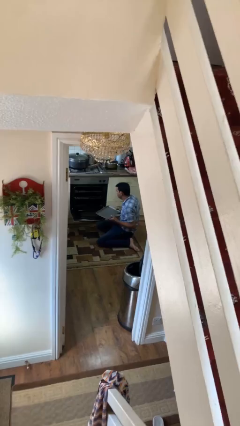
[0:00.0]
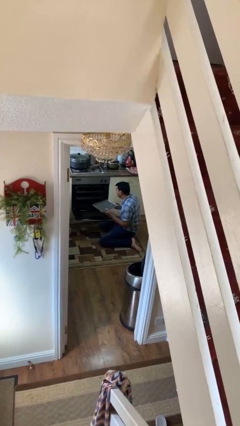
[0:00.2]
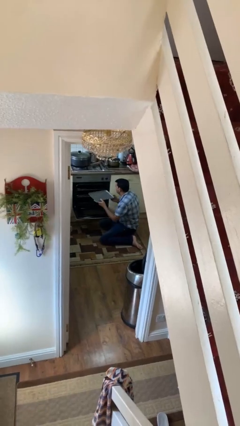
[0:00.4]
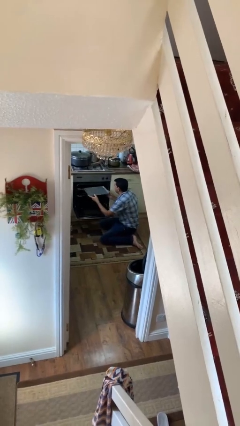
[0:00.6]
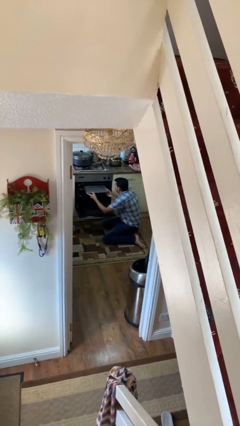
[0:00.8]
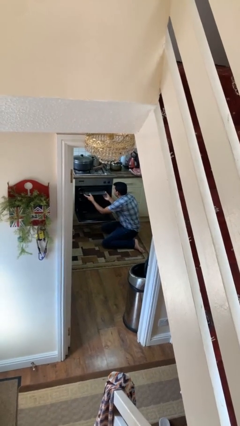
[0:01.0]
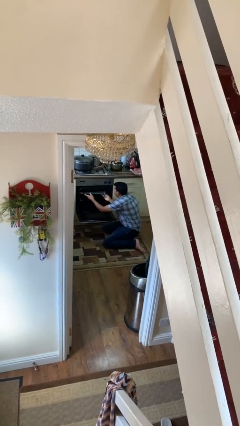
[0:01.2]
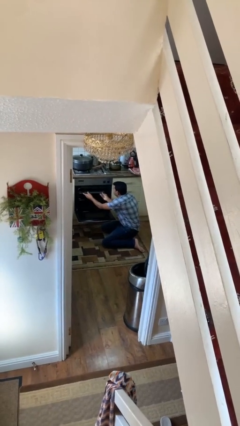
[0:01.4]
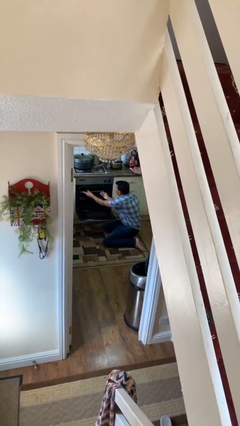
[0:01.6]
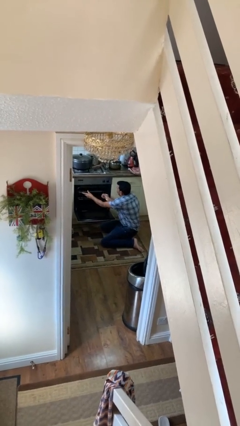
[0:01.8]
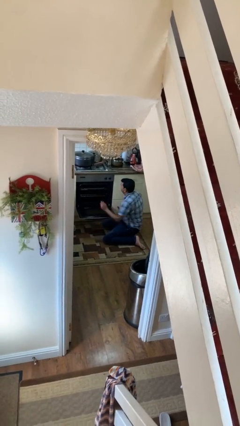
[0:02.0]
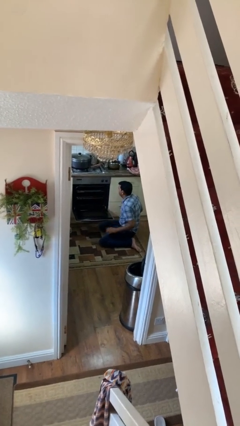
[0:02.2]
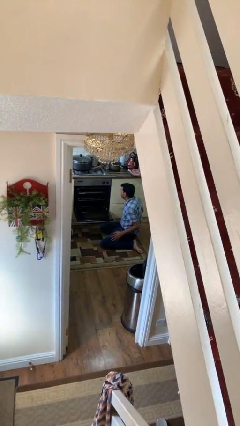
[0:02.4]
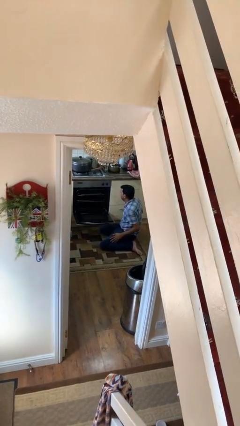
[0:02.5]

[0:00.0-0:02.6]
person puts object into oven

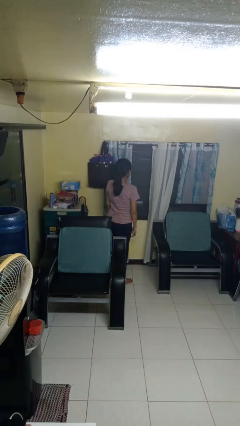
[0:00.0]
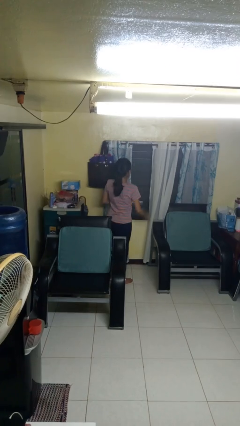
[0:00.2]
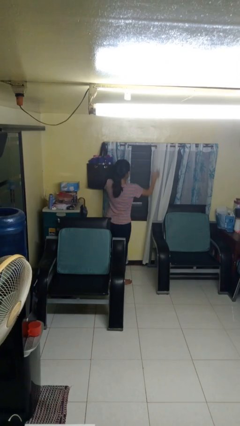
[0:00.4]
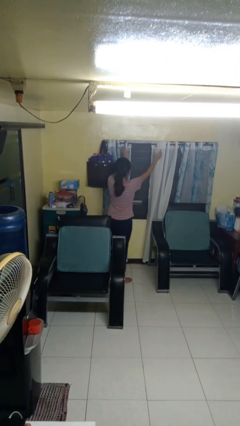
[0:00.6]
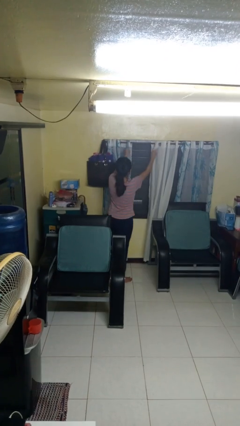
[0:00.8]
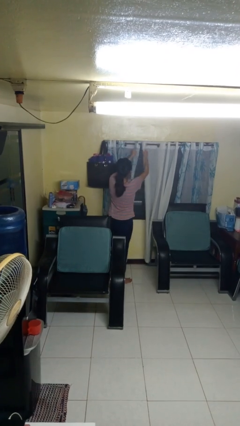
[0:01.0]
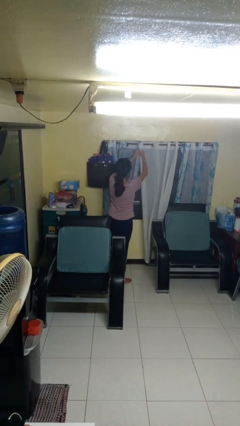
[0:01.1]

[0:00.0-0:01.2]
person closes curtains

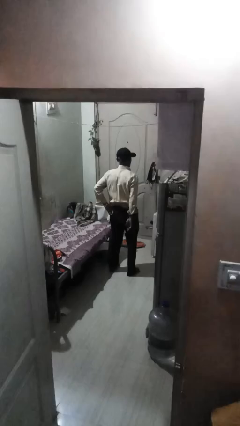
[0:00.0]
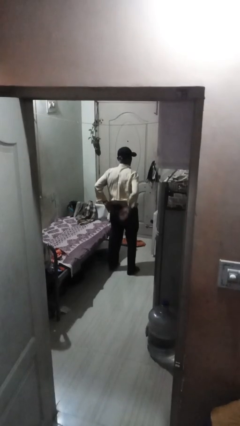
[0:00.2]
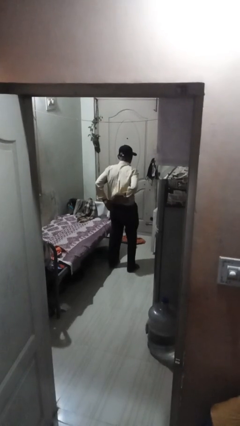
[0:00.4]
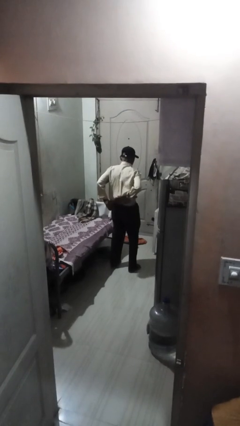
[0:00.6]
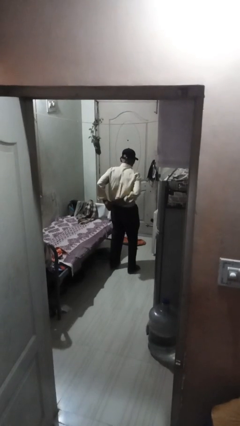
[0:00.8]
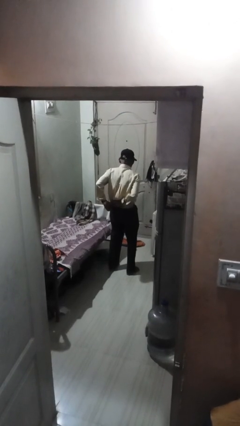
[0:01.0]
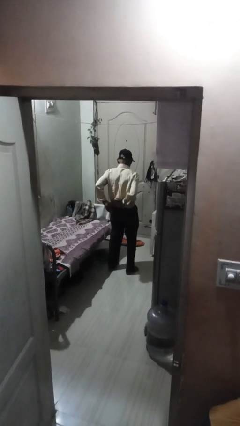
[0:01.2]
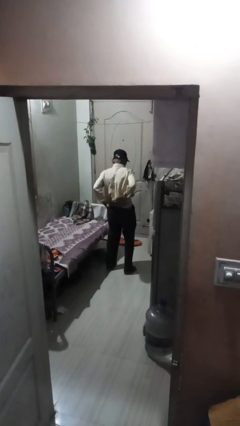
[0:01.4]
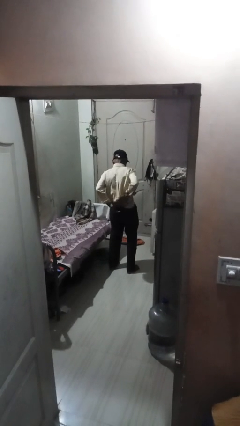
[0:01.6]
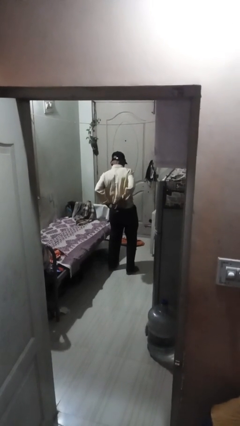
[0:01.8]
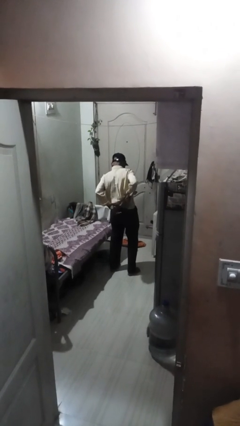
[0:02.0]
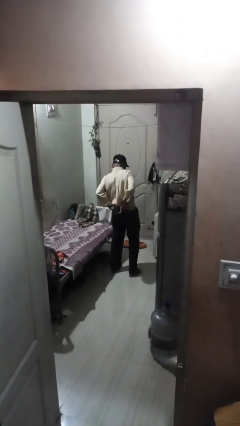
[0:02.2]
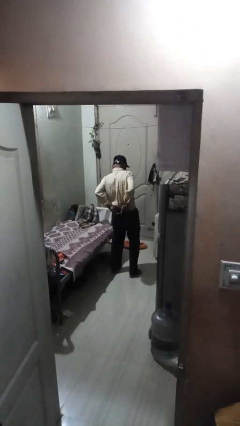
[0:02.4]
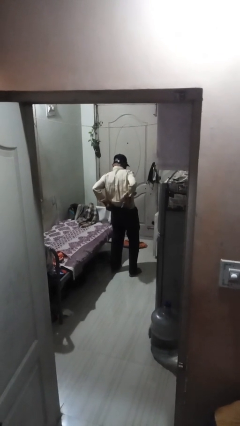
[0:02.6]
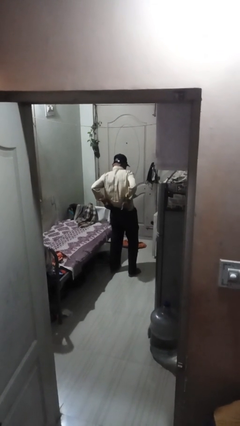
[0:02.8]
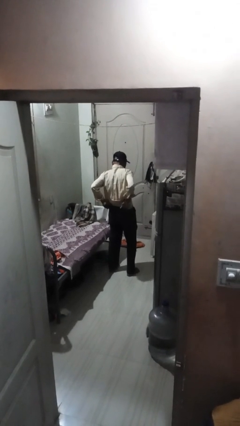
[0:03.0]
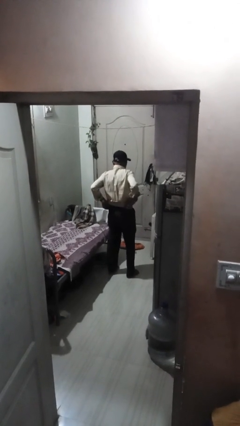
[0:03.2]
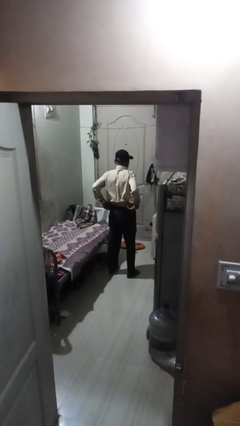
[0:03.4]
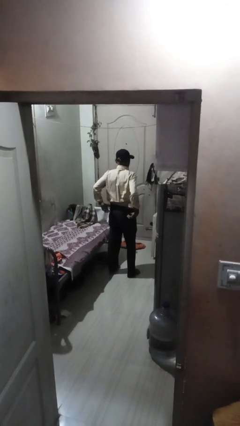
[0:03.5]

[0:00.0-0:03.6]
person tucks in shirt

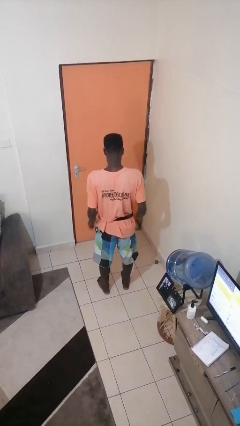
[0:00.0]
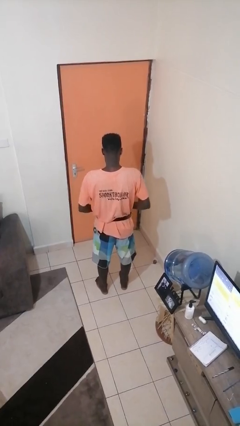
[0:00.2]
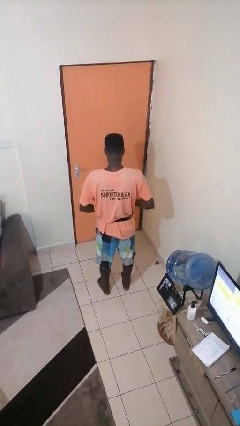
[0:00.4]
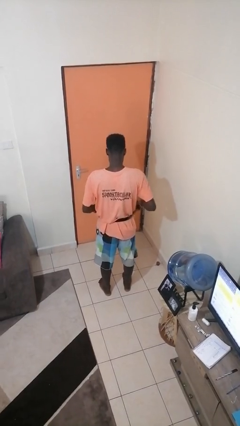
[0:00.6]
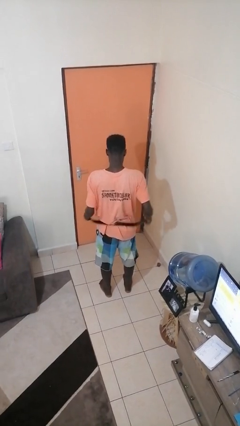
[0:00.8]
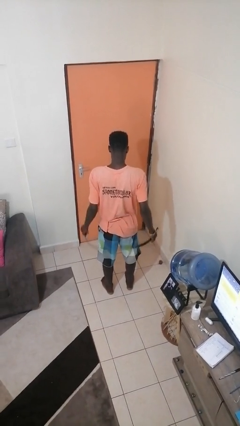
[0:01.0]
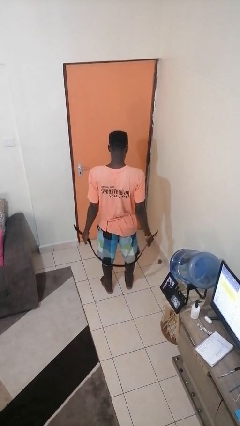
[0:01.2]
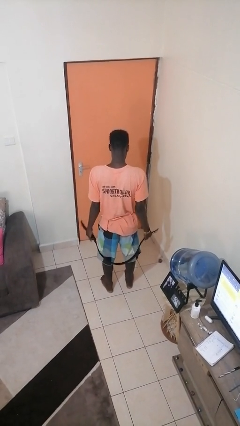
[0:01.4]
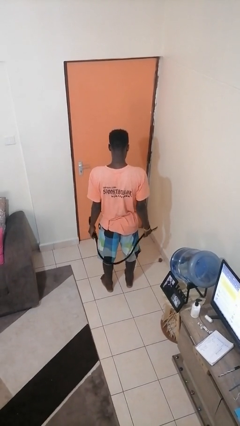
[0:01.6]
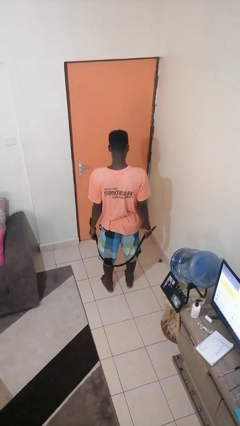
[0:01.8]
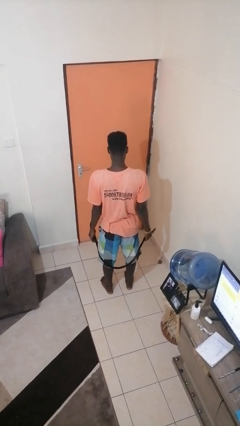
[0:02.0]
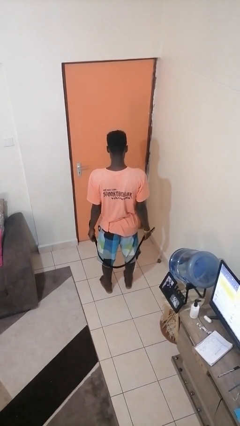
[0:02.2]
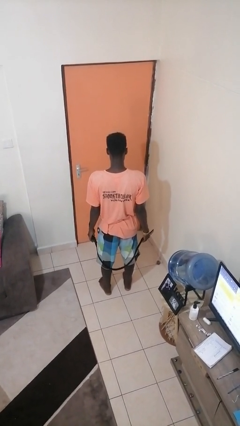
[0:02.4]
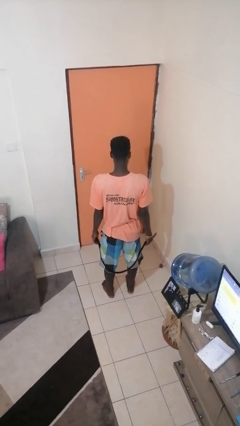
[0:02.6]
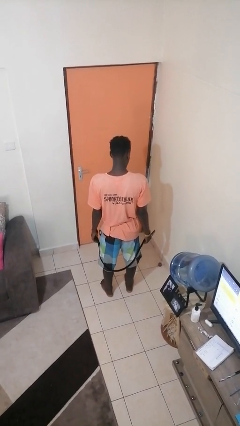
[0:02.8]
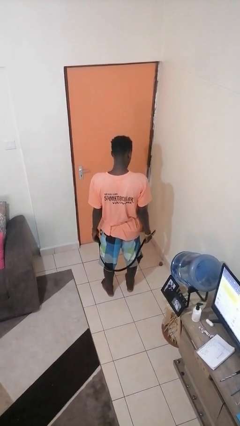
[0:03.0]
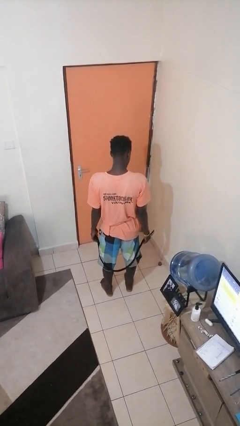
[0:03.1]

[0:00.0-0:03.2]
person takes off belt

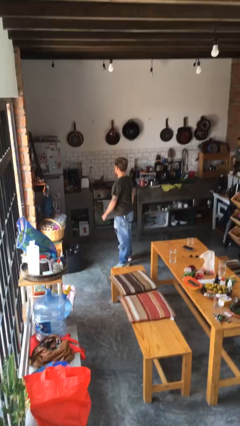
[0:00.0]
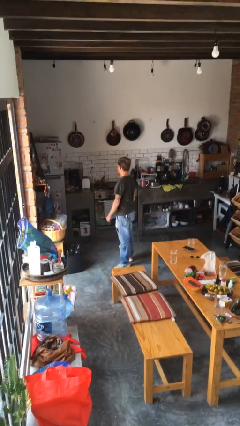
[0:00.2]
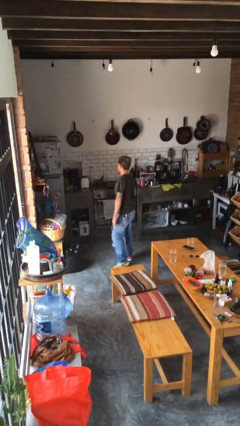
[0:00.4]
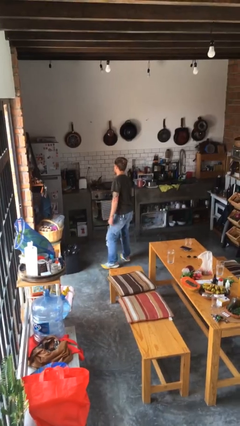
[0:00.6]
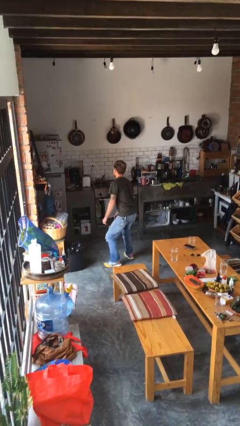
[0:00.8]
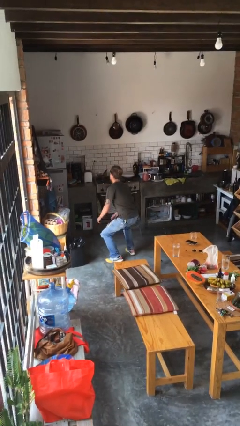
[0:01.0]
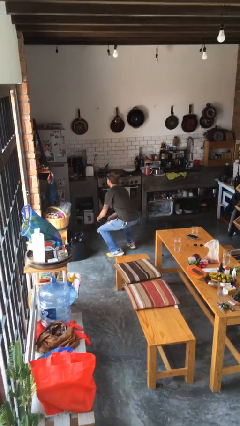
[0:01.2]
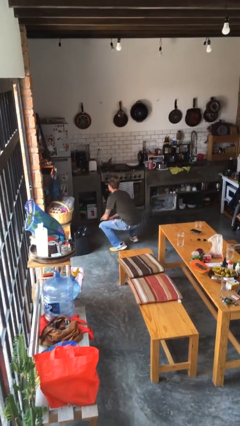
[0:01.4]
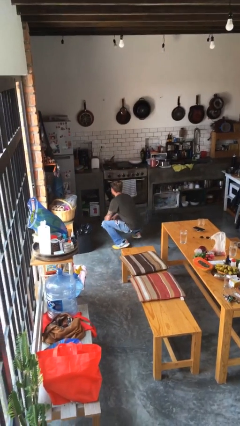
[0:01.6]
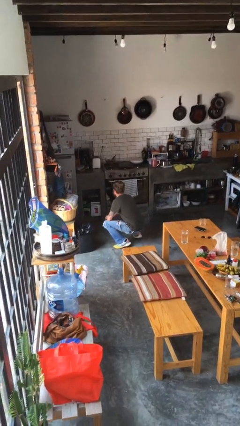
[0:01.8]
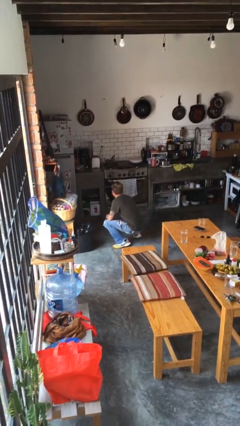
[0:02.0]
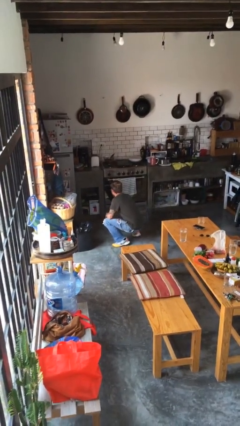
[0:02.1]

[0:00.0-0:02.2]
person squats

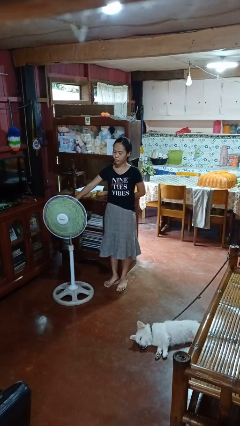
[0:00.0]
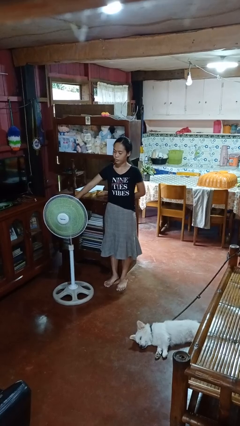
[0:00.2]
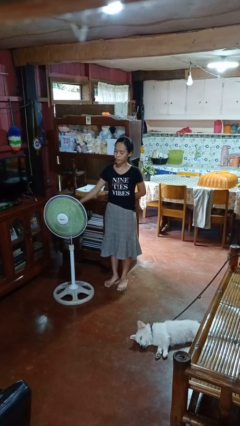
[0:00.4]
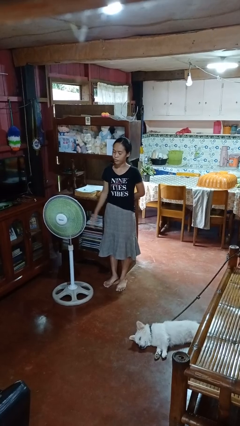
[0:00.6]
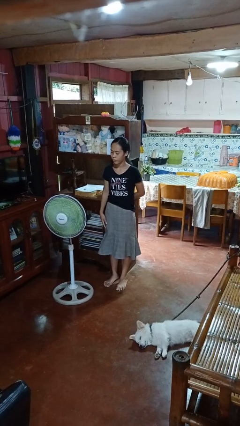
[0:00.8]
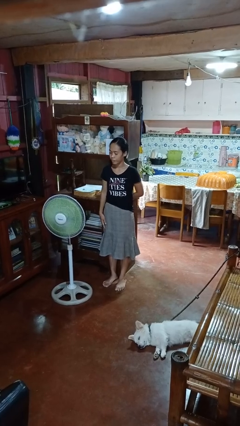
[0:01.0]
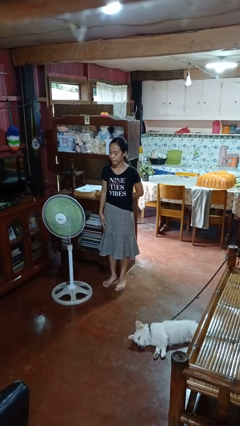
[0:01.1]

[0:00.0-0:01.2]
person turns off fan

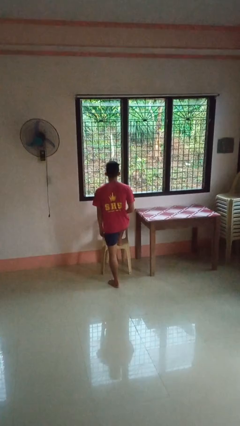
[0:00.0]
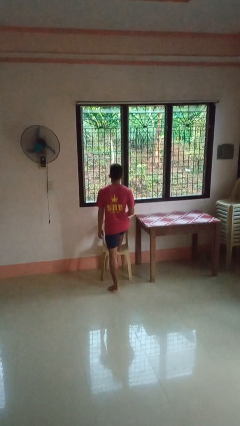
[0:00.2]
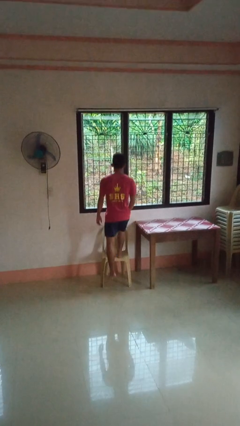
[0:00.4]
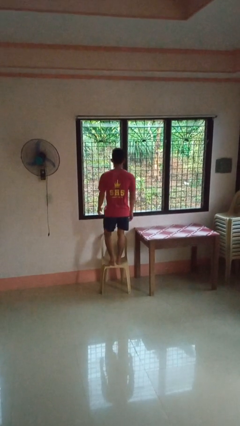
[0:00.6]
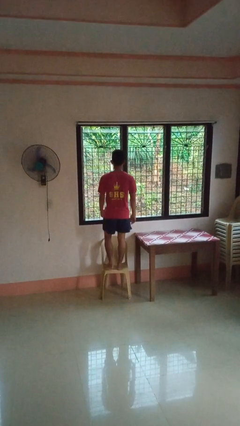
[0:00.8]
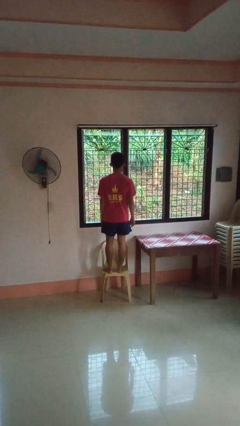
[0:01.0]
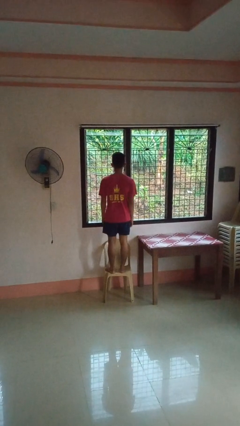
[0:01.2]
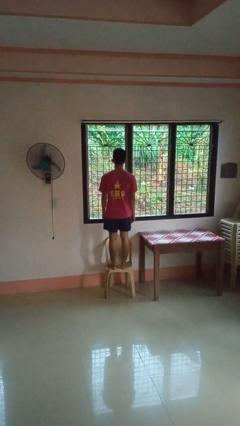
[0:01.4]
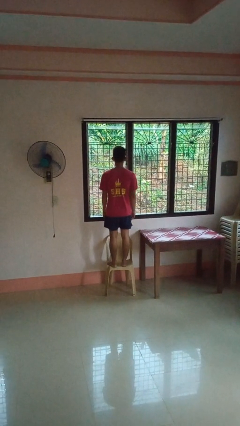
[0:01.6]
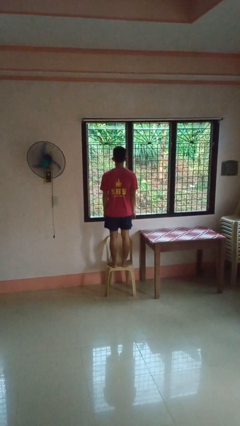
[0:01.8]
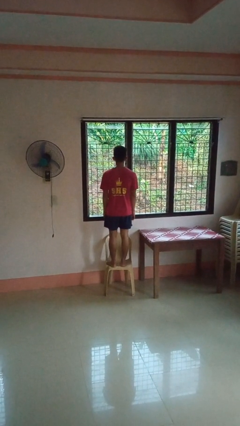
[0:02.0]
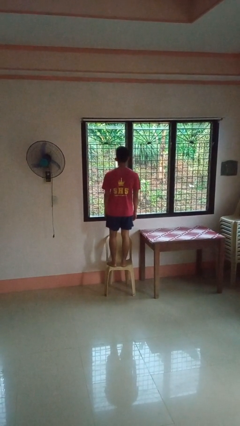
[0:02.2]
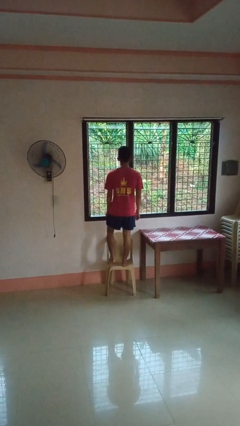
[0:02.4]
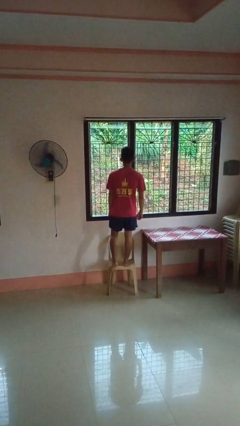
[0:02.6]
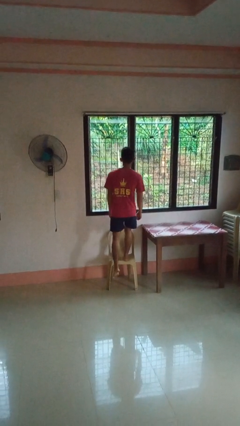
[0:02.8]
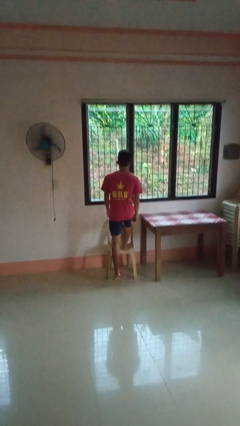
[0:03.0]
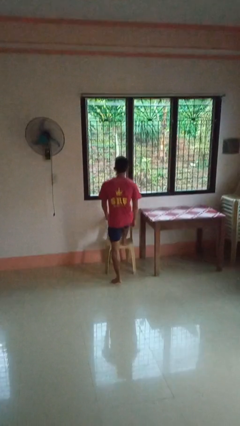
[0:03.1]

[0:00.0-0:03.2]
person climbs on chair

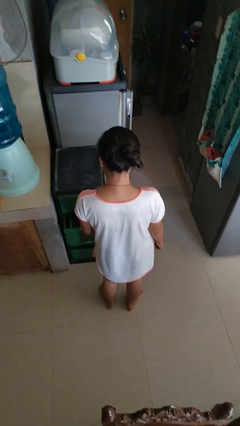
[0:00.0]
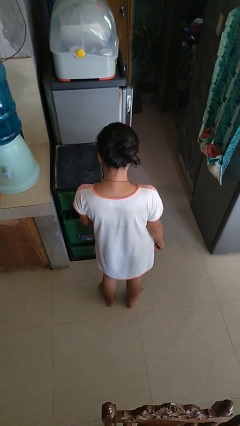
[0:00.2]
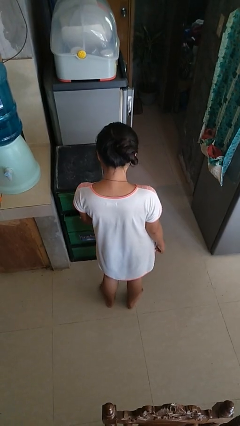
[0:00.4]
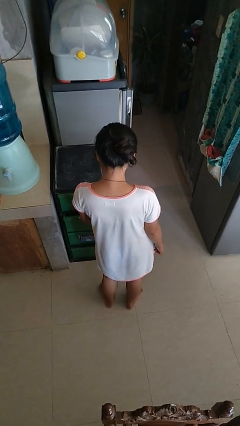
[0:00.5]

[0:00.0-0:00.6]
person closes kitchen drawer
